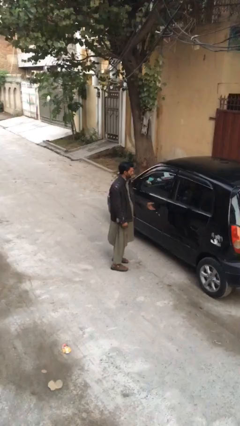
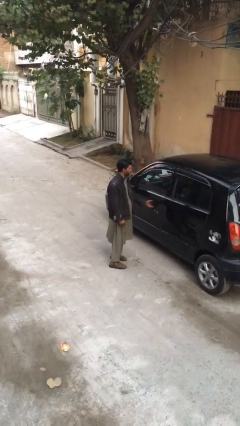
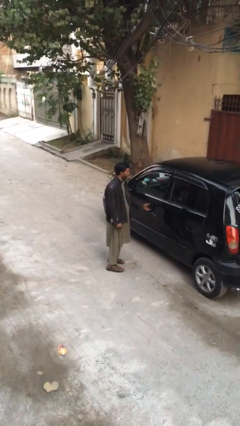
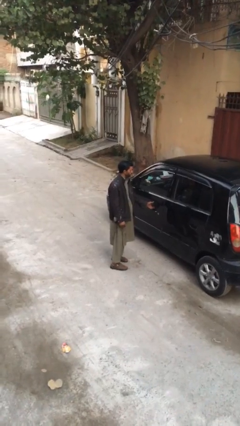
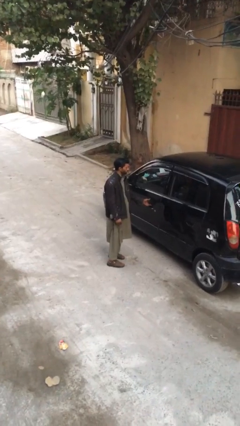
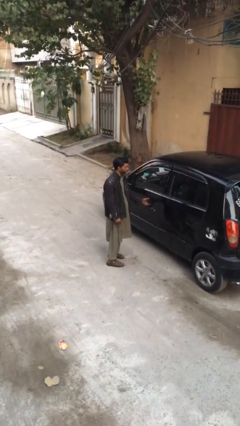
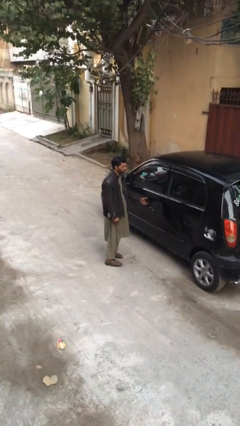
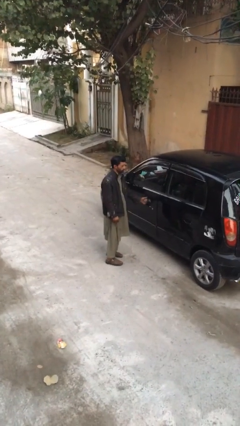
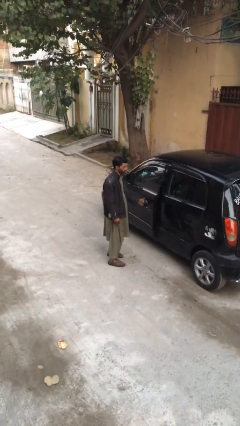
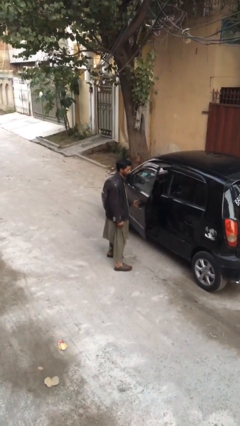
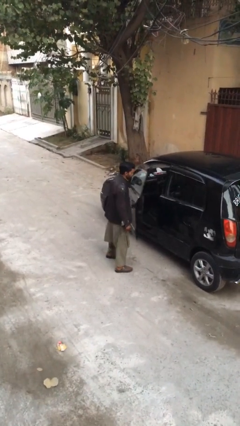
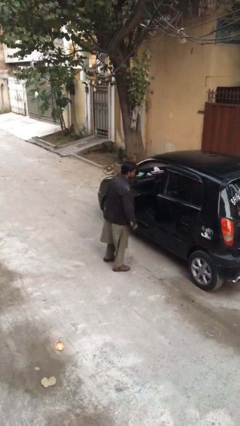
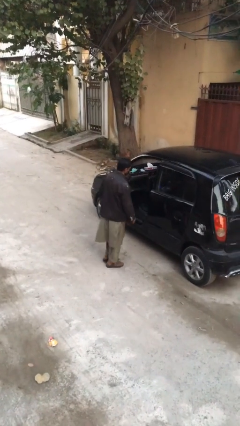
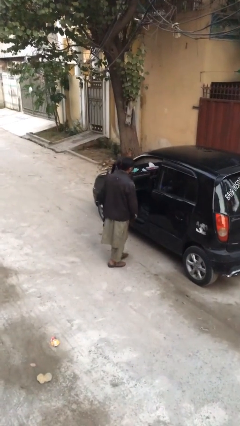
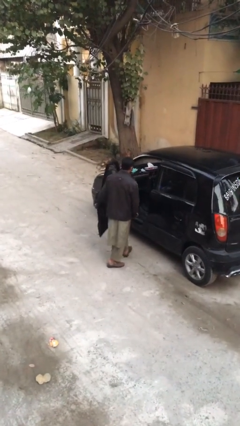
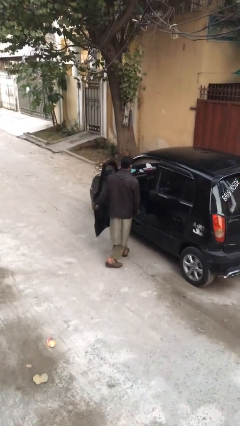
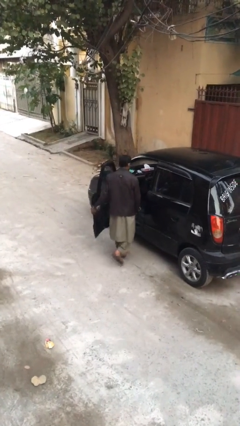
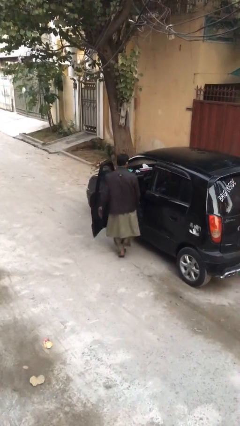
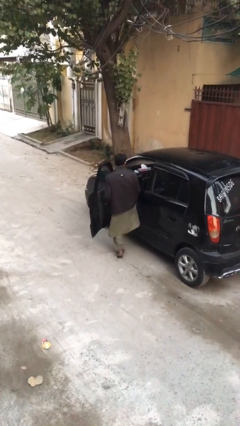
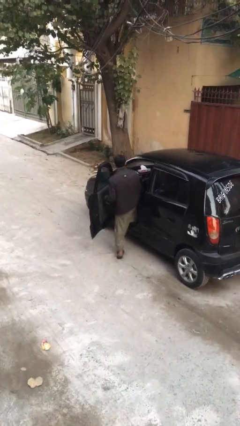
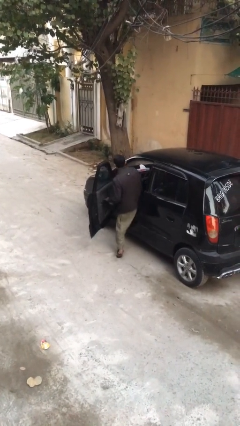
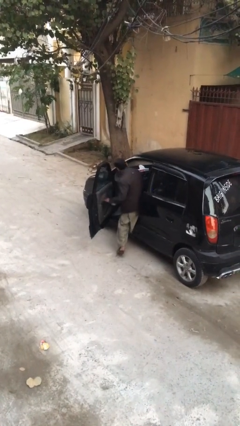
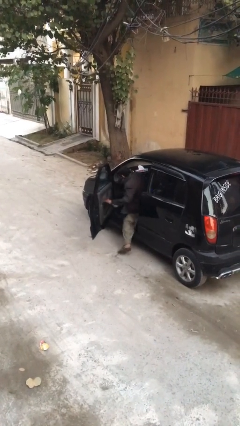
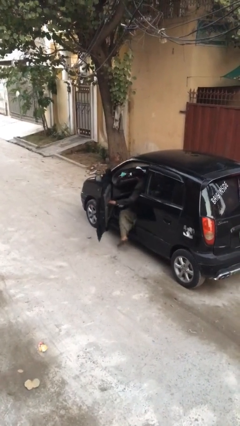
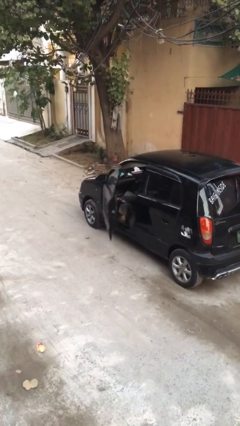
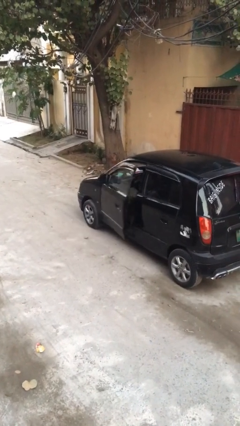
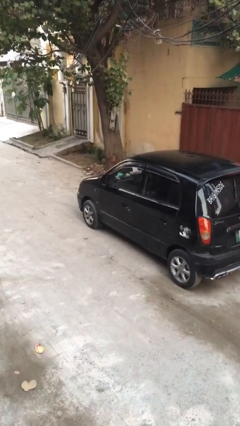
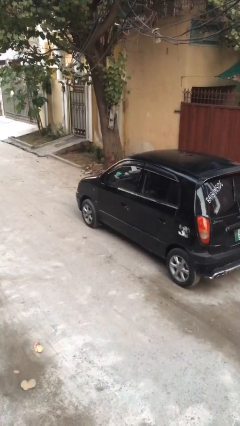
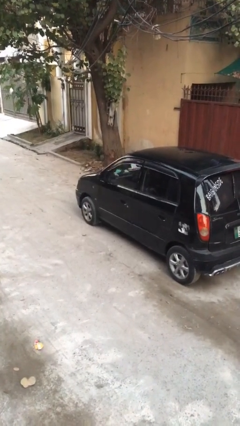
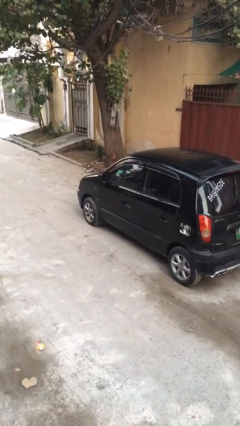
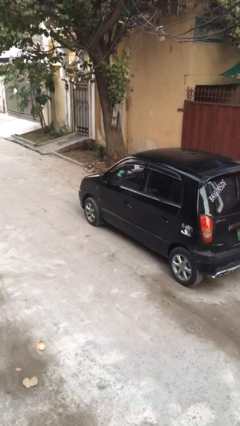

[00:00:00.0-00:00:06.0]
car picks up person

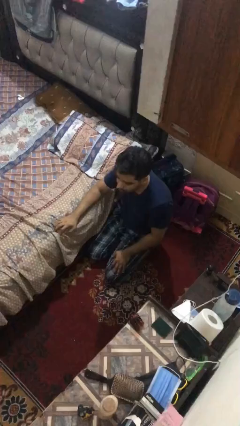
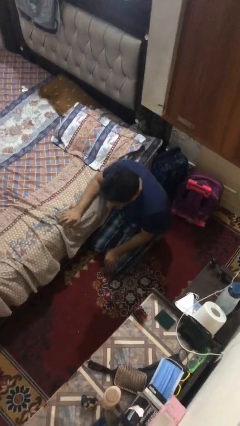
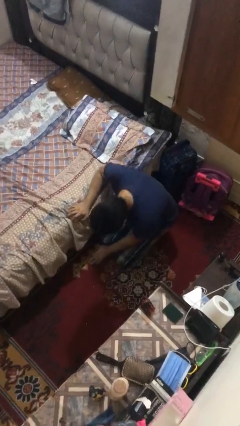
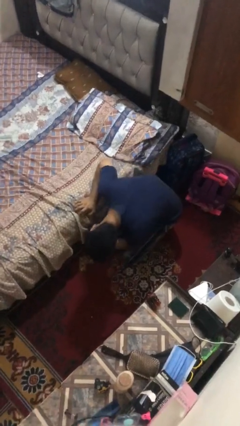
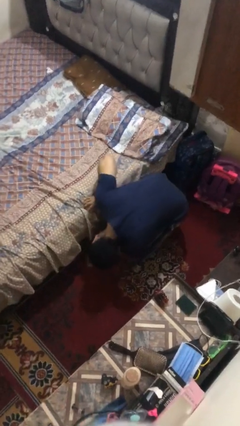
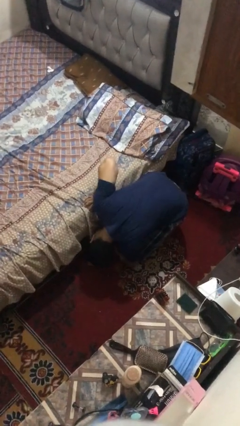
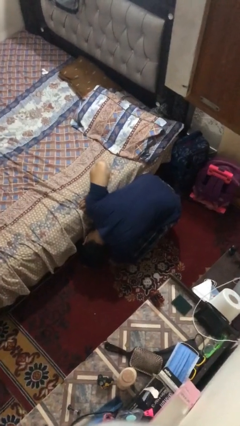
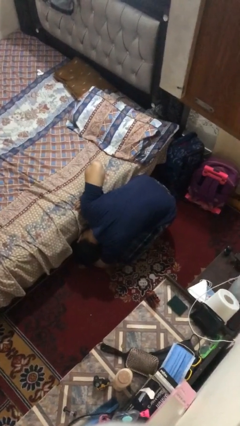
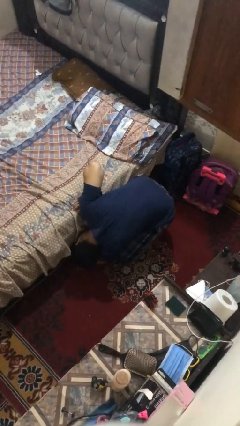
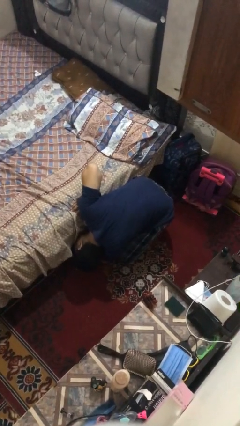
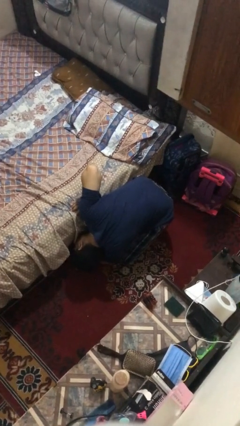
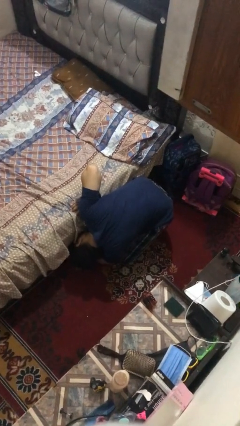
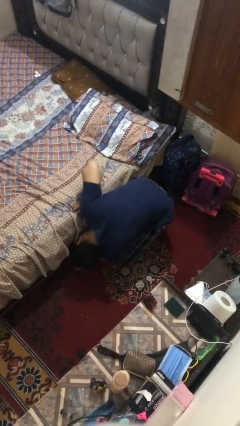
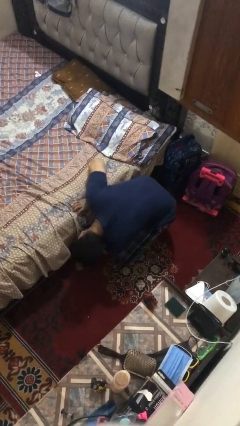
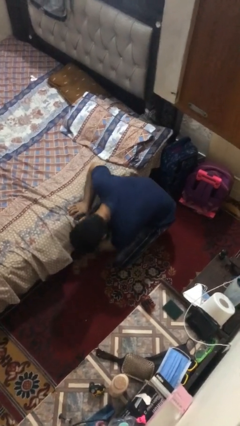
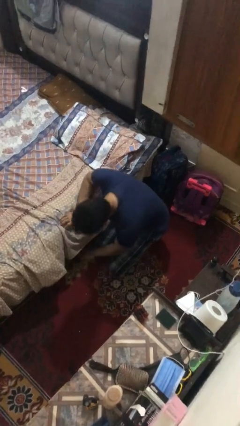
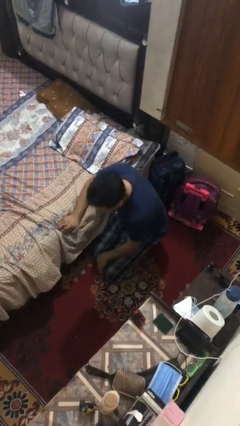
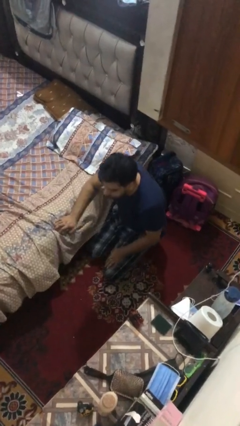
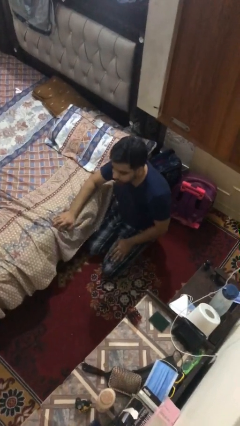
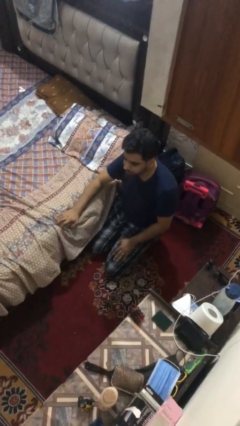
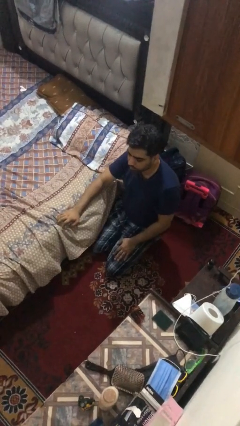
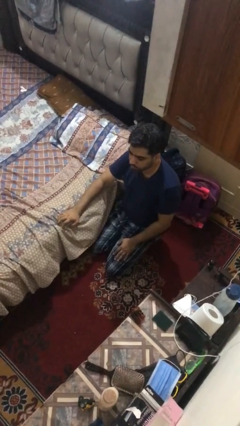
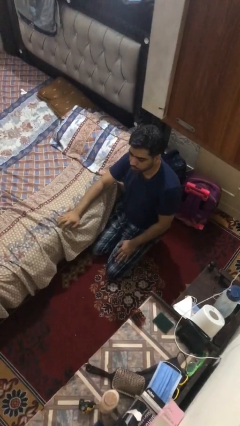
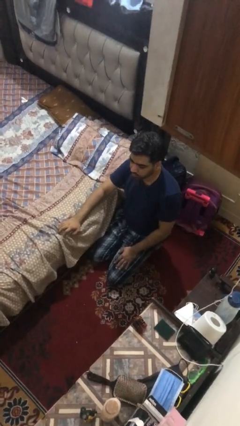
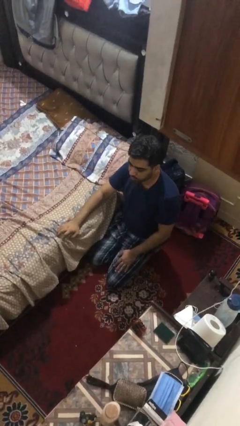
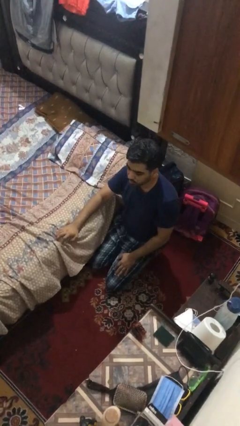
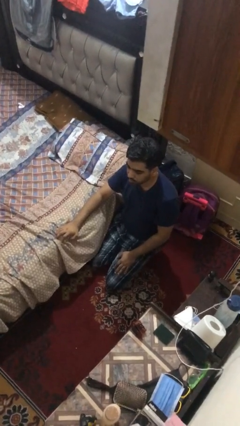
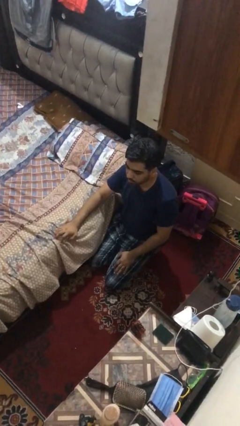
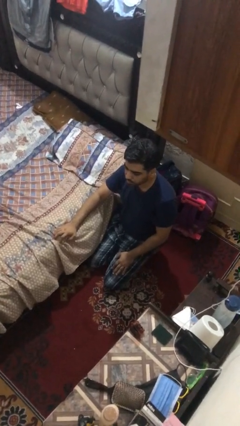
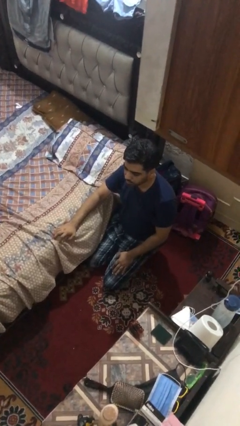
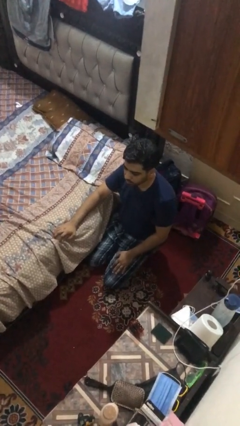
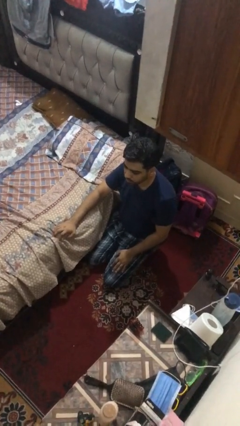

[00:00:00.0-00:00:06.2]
person searches under bed

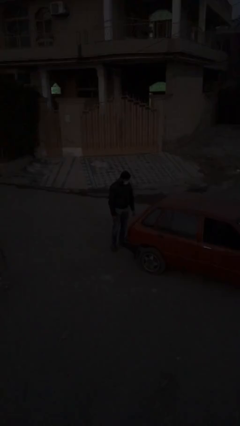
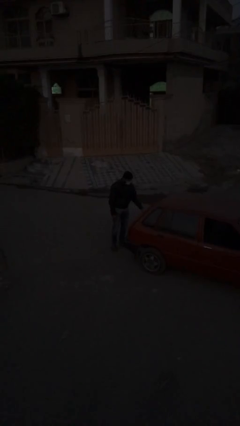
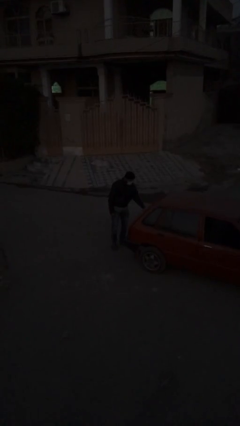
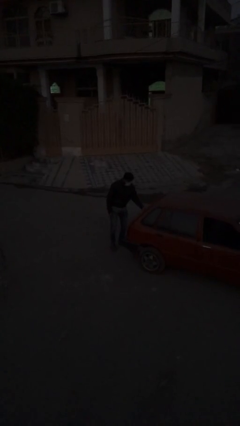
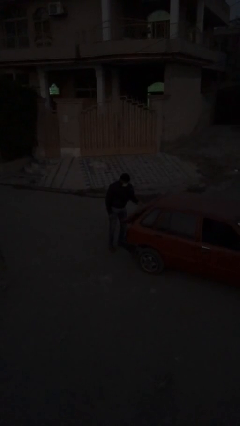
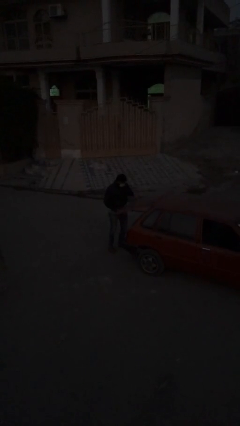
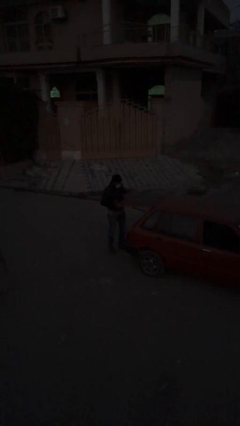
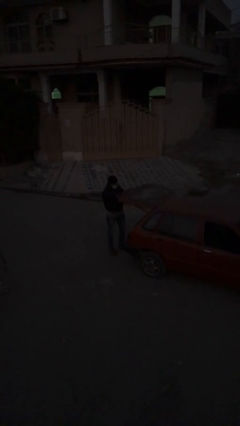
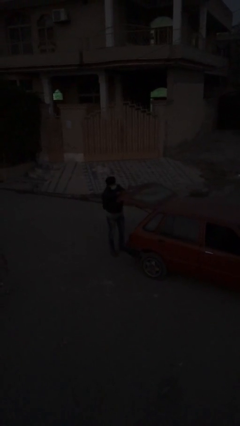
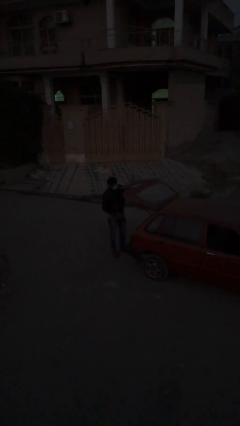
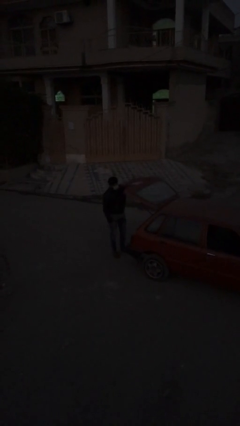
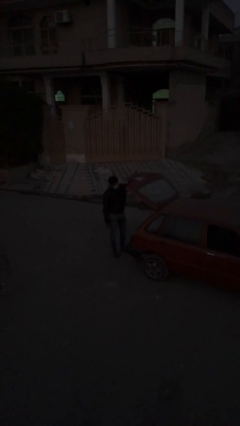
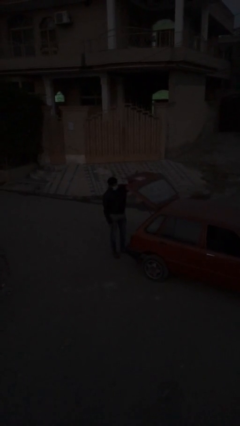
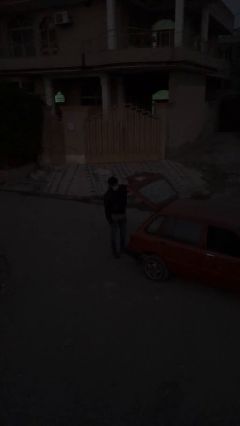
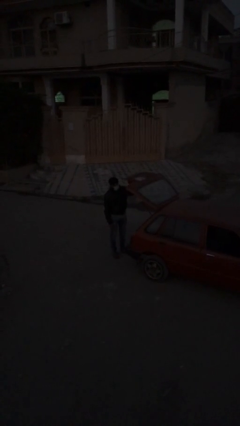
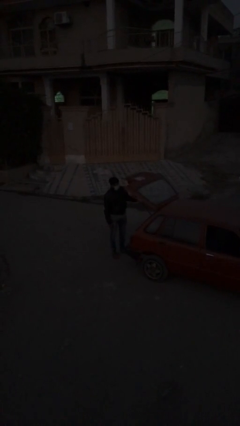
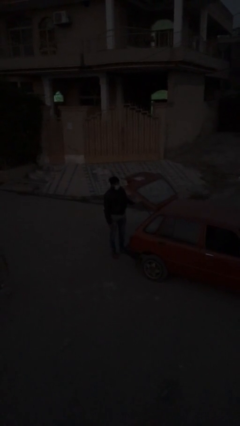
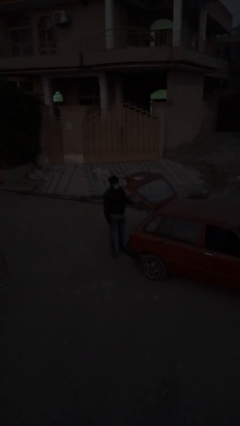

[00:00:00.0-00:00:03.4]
person opens car trunk

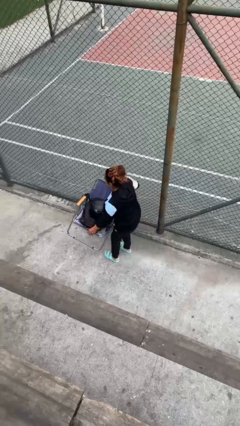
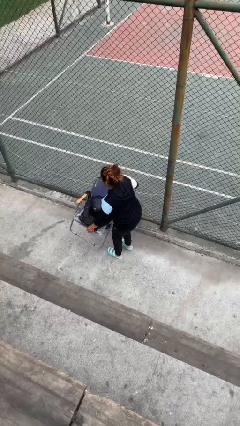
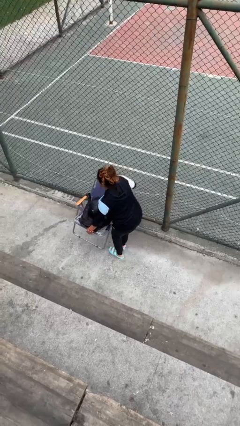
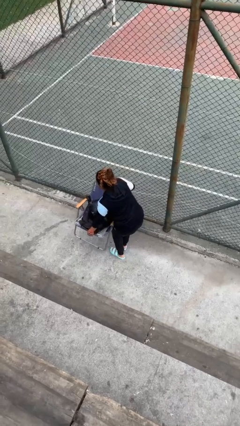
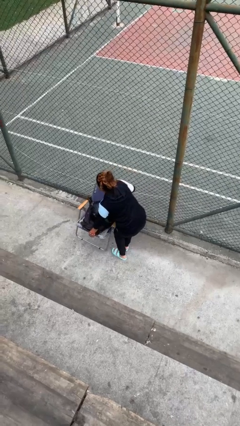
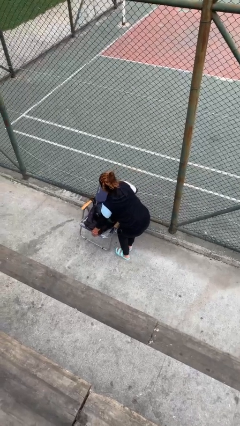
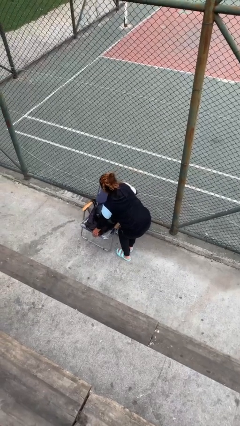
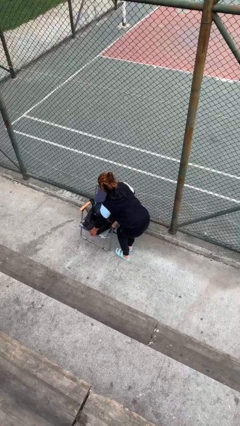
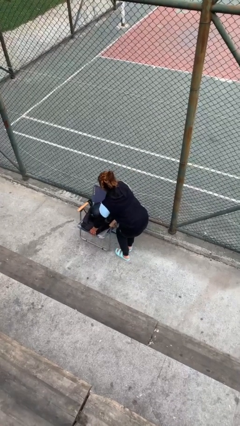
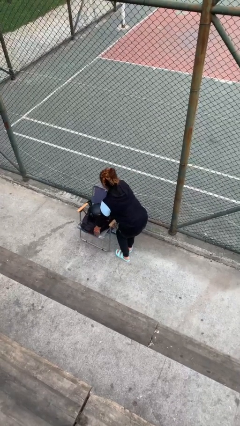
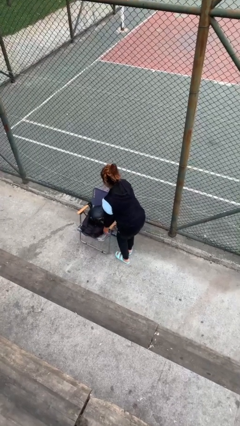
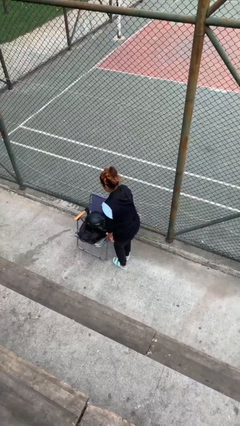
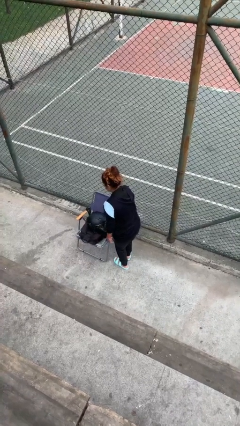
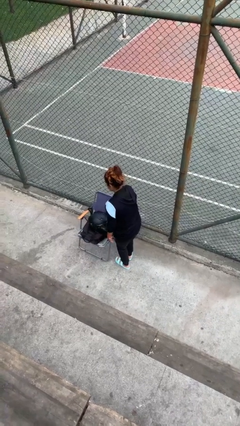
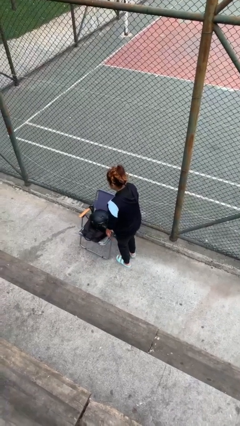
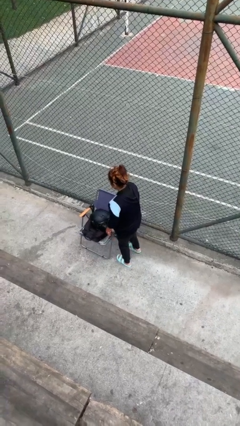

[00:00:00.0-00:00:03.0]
person puts down object on floor
